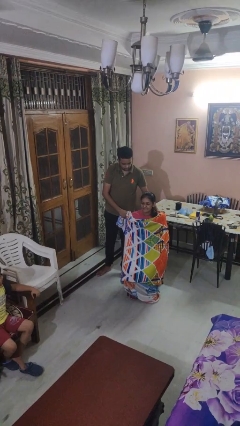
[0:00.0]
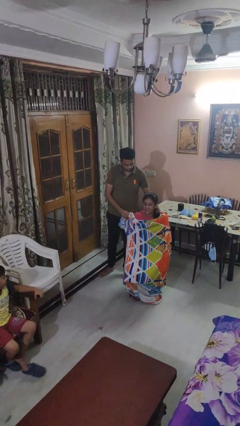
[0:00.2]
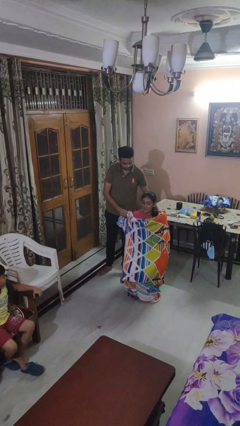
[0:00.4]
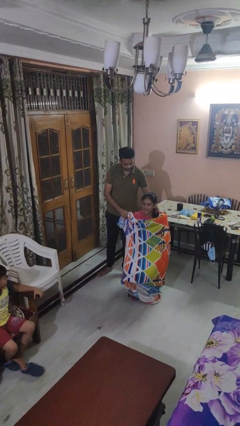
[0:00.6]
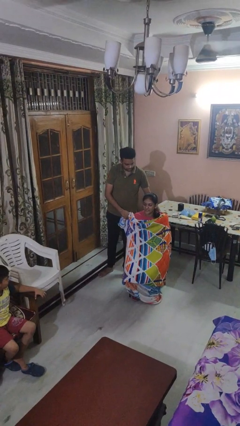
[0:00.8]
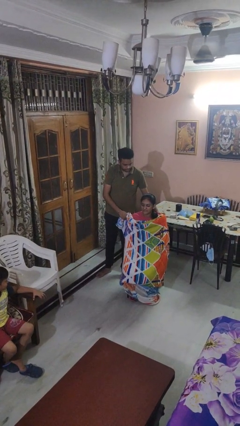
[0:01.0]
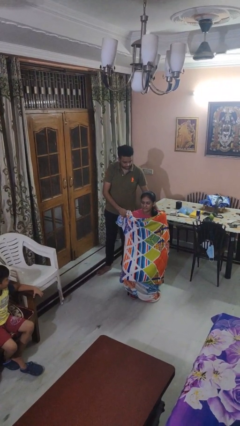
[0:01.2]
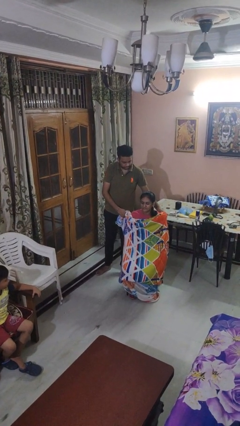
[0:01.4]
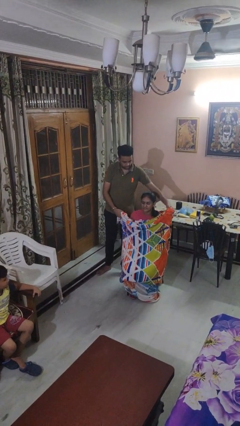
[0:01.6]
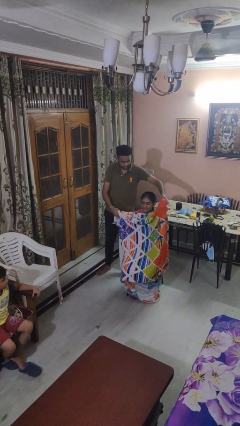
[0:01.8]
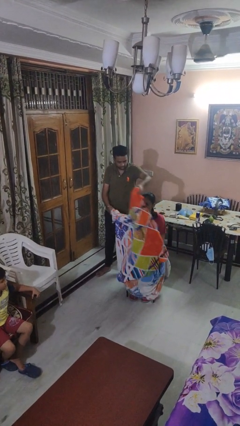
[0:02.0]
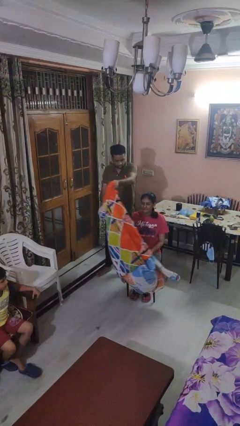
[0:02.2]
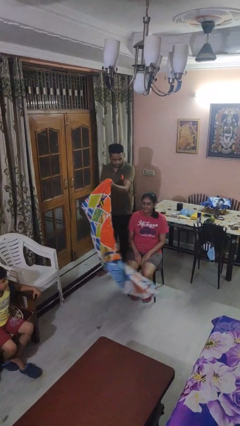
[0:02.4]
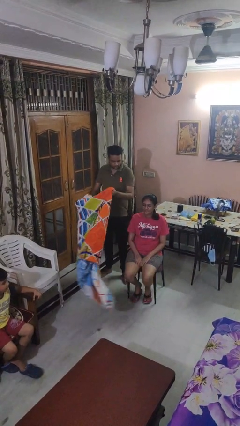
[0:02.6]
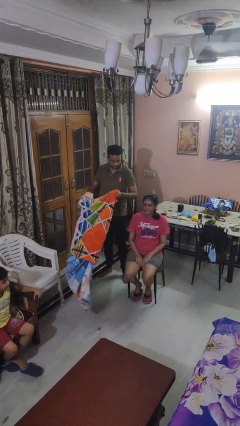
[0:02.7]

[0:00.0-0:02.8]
person uncovers friend with blanket

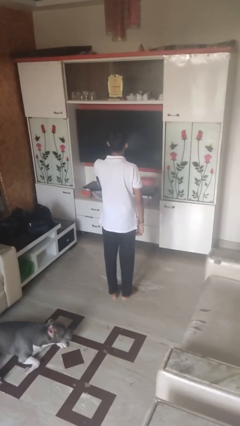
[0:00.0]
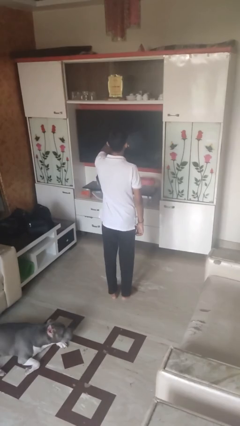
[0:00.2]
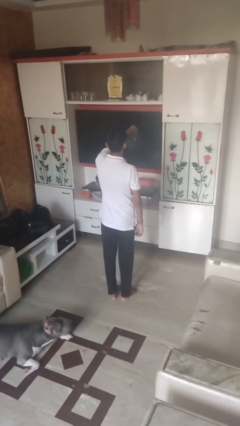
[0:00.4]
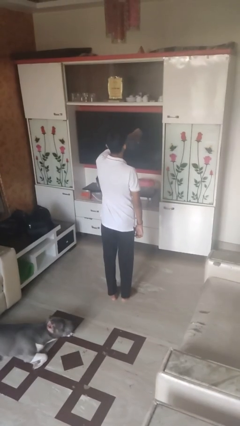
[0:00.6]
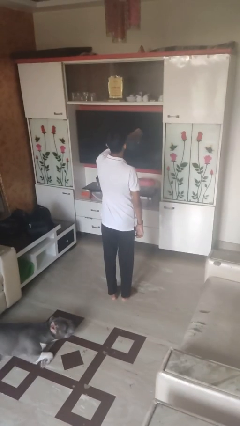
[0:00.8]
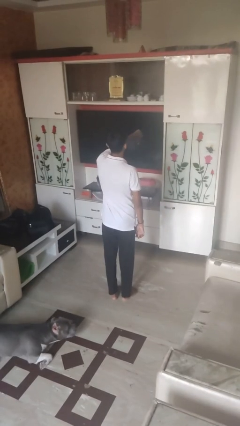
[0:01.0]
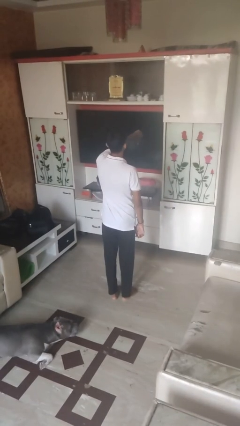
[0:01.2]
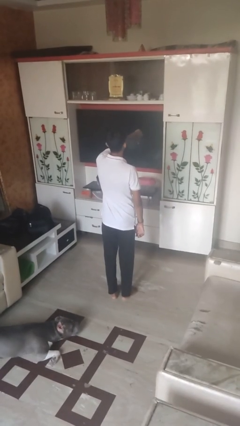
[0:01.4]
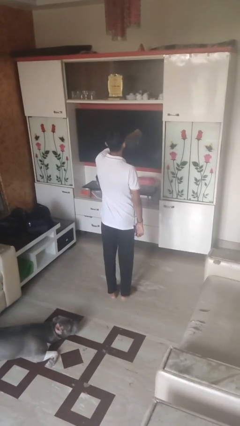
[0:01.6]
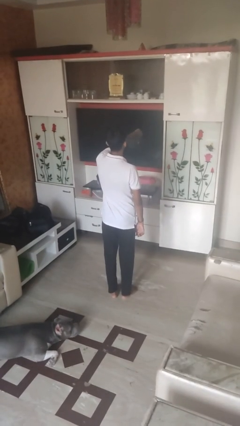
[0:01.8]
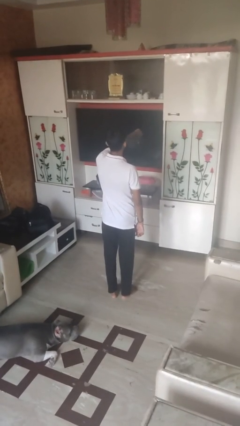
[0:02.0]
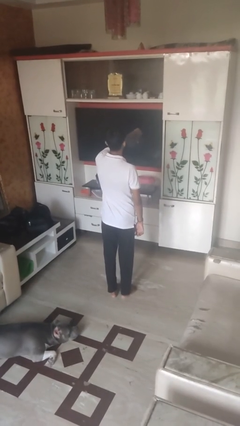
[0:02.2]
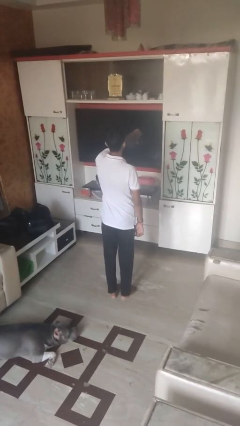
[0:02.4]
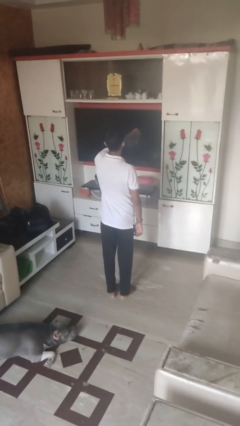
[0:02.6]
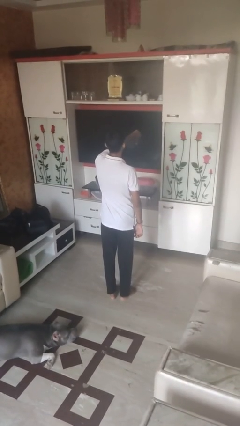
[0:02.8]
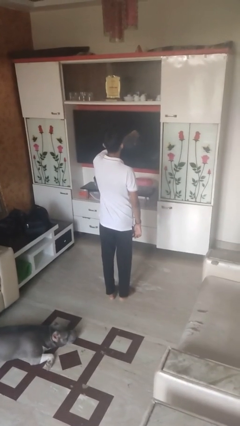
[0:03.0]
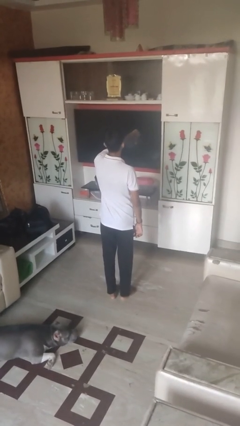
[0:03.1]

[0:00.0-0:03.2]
person gestures thumbs down

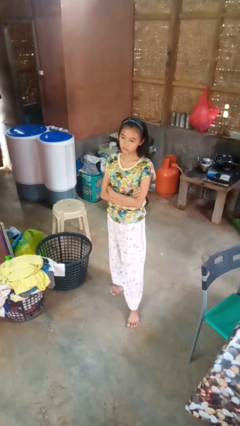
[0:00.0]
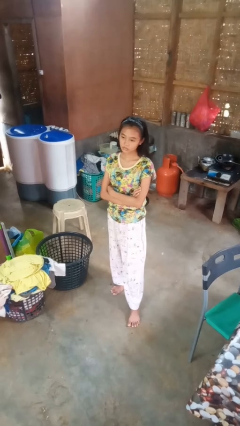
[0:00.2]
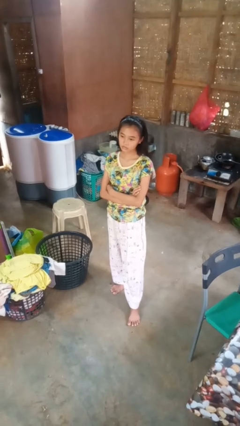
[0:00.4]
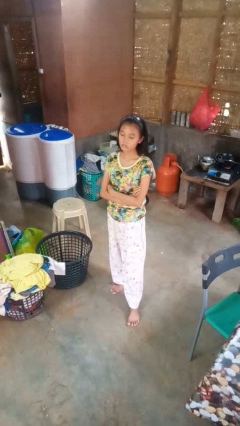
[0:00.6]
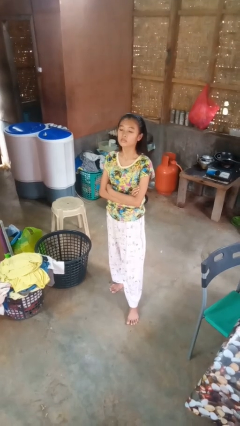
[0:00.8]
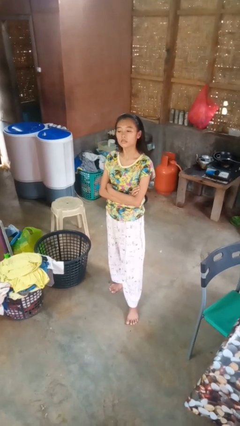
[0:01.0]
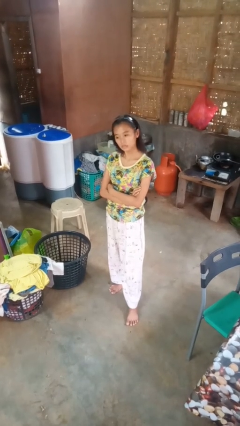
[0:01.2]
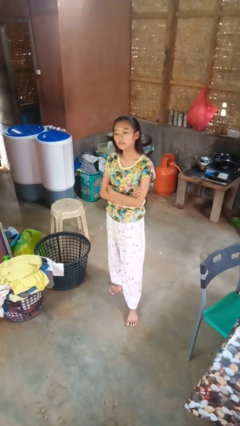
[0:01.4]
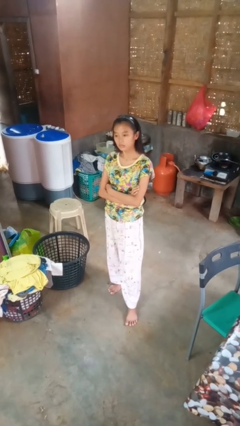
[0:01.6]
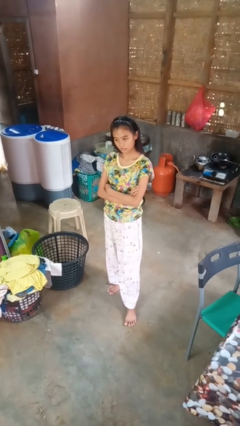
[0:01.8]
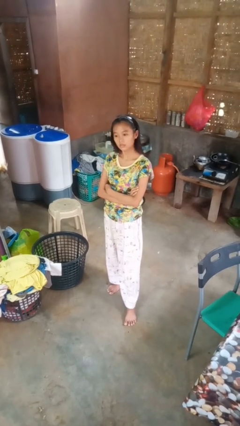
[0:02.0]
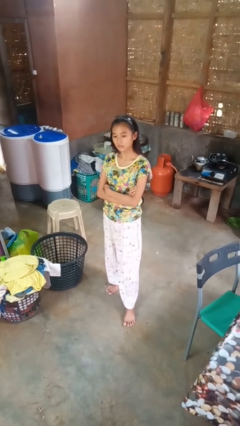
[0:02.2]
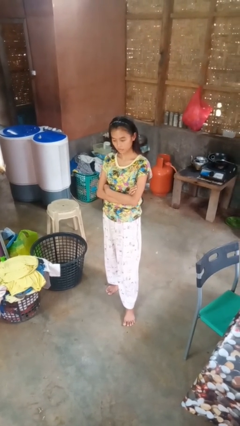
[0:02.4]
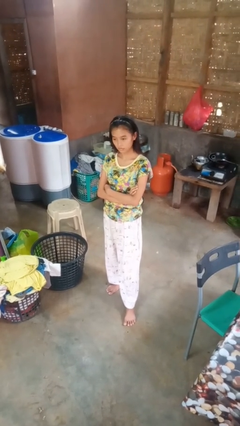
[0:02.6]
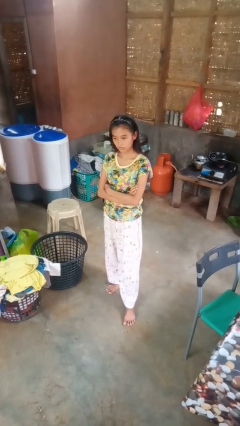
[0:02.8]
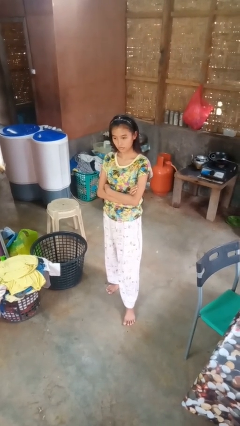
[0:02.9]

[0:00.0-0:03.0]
person nods head

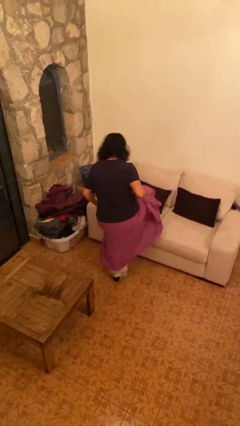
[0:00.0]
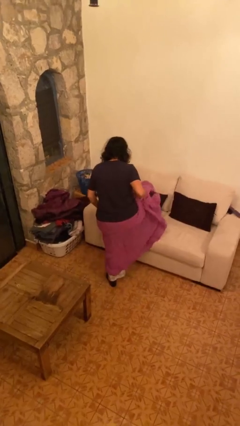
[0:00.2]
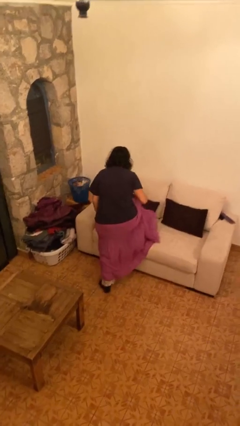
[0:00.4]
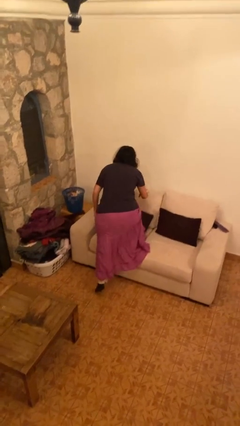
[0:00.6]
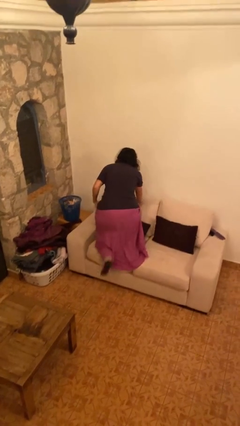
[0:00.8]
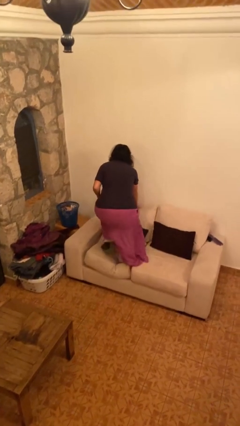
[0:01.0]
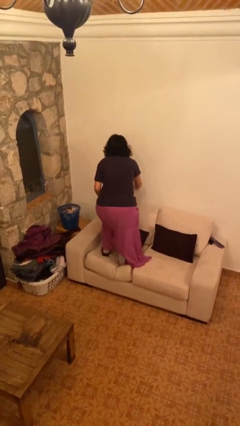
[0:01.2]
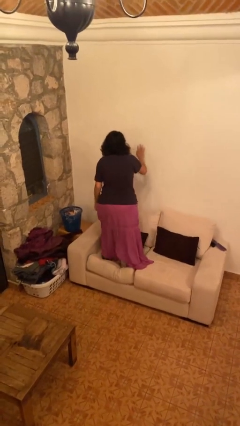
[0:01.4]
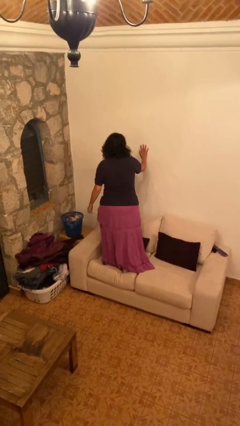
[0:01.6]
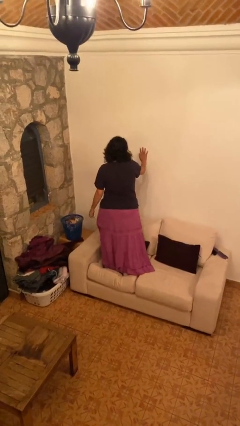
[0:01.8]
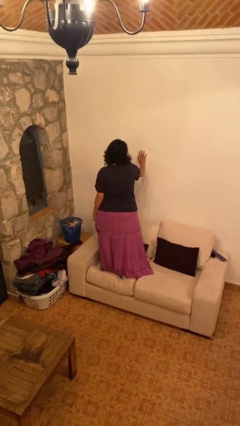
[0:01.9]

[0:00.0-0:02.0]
person climbs on couch

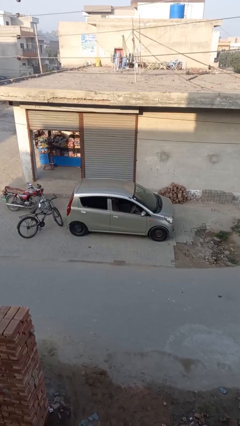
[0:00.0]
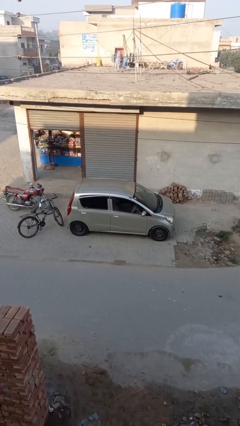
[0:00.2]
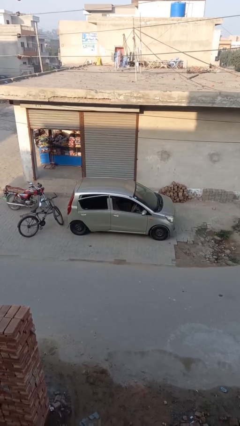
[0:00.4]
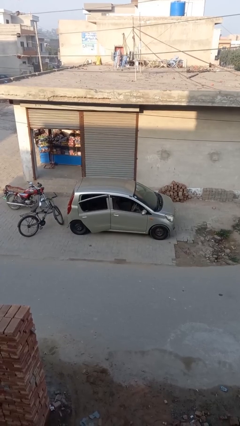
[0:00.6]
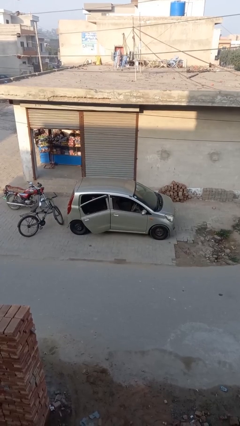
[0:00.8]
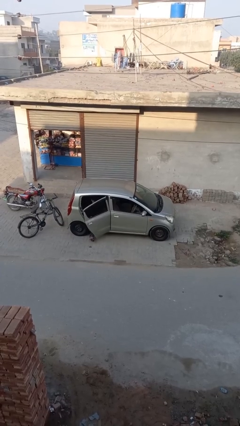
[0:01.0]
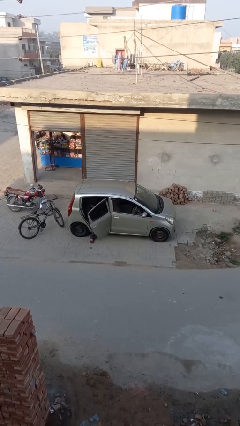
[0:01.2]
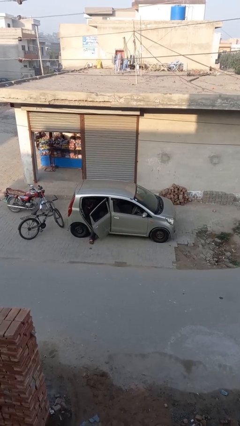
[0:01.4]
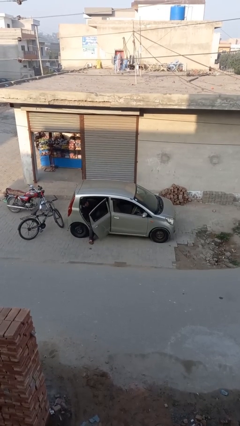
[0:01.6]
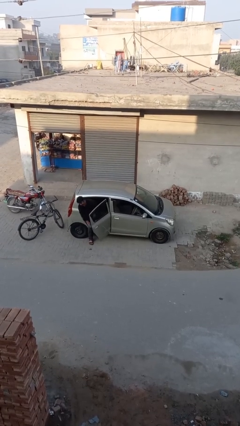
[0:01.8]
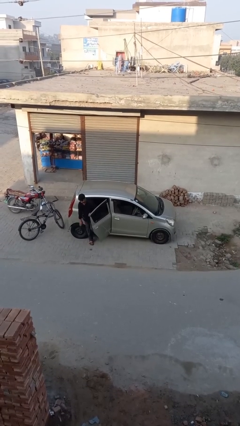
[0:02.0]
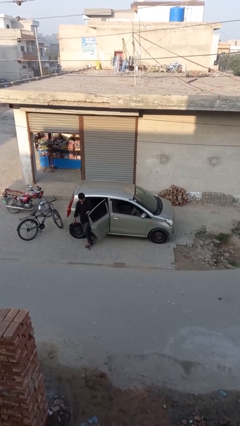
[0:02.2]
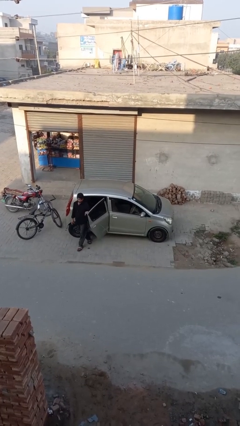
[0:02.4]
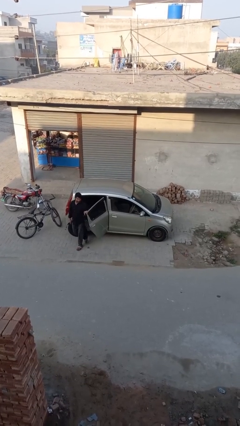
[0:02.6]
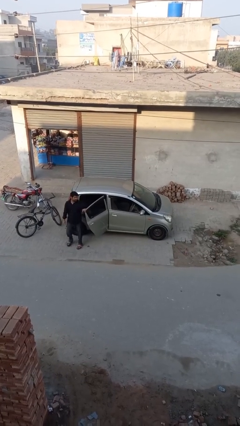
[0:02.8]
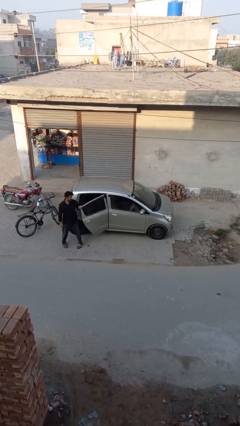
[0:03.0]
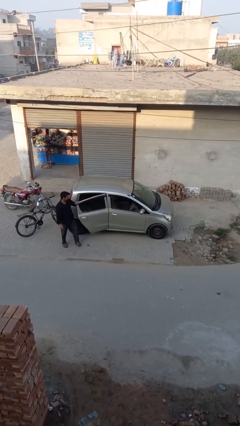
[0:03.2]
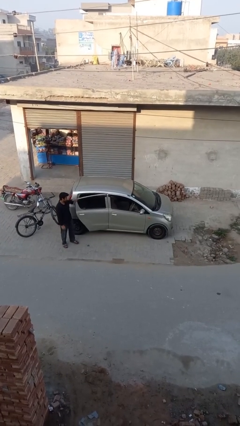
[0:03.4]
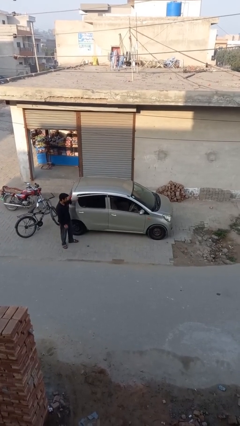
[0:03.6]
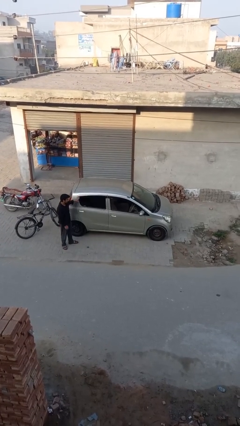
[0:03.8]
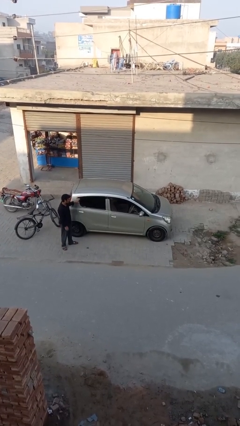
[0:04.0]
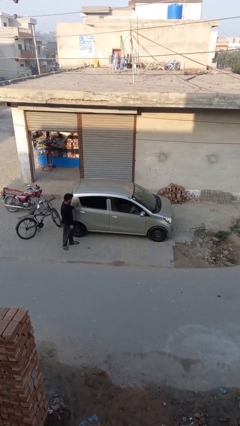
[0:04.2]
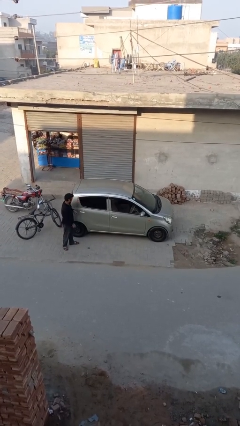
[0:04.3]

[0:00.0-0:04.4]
car drops off person

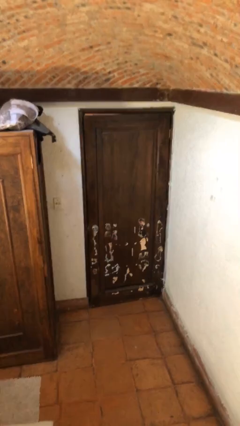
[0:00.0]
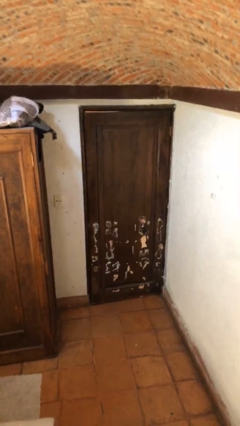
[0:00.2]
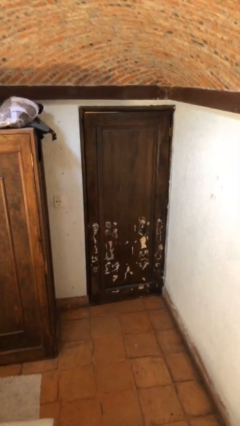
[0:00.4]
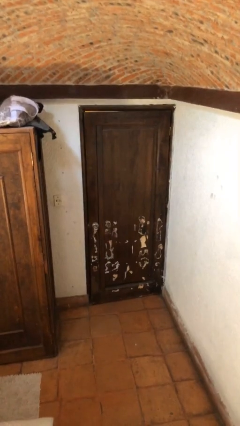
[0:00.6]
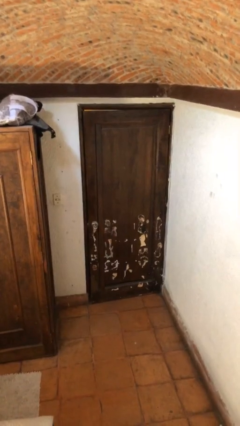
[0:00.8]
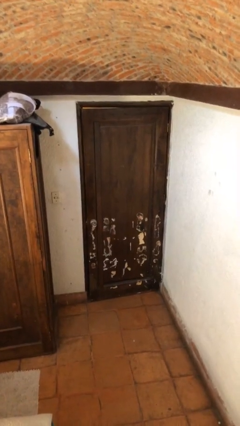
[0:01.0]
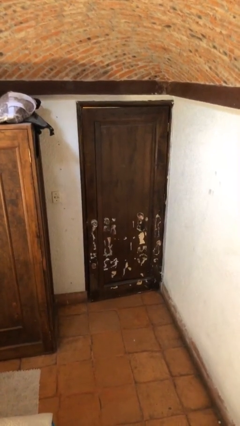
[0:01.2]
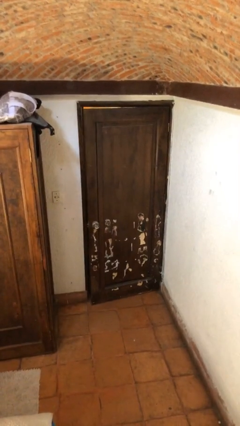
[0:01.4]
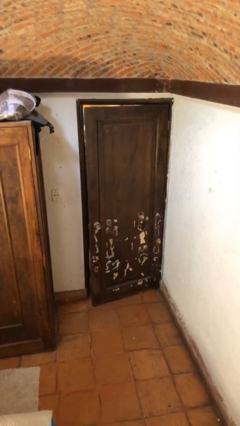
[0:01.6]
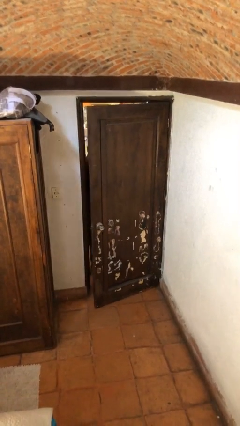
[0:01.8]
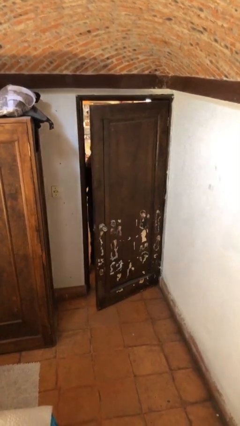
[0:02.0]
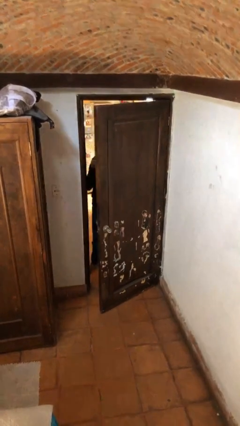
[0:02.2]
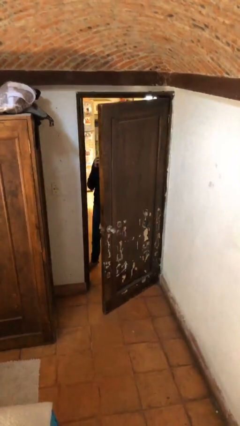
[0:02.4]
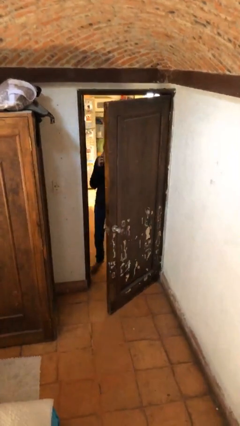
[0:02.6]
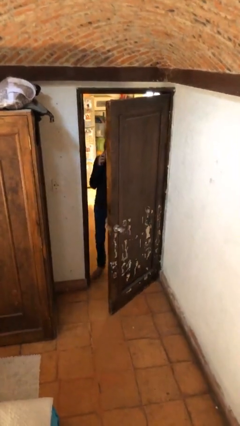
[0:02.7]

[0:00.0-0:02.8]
person opens facility door
